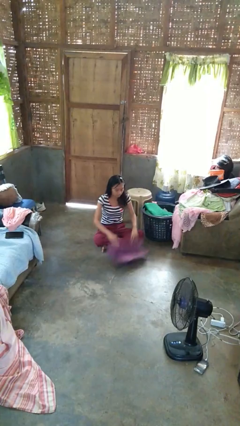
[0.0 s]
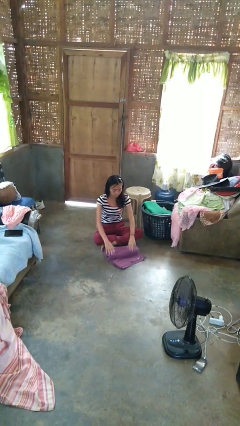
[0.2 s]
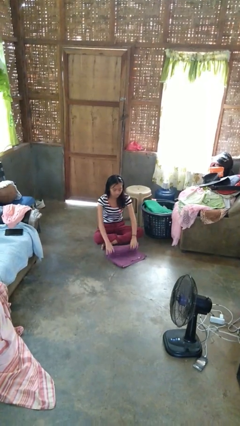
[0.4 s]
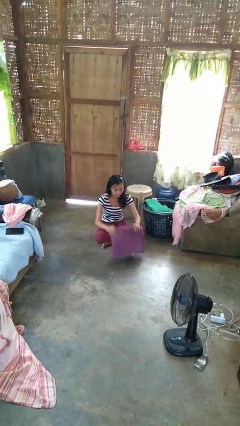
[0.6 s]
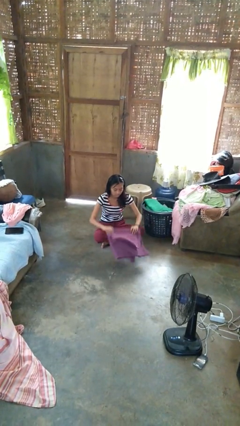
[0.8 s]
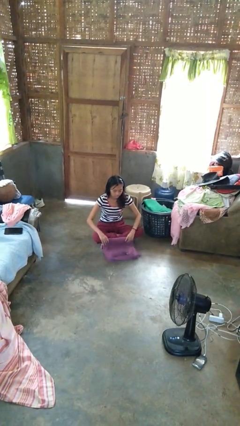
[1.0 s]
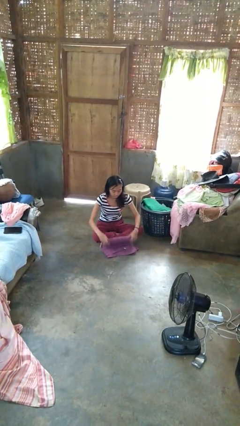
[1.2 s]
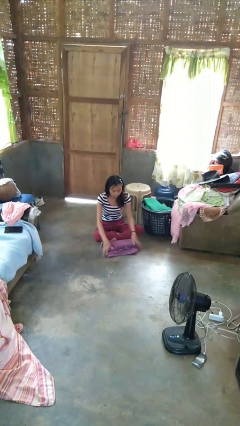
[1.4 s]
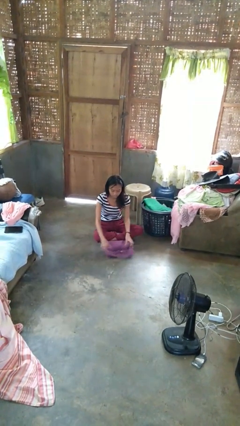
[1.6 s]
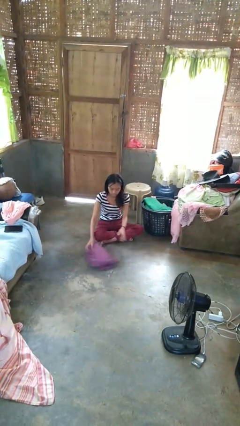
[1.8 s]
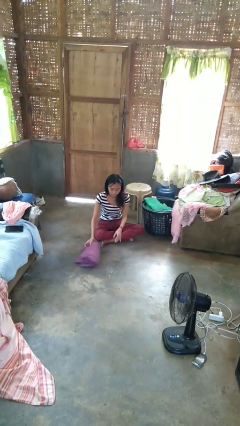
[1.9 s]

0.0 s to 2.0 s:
person folds towel

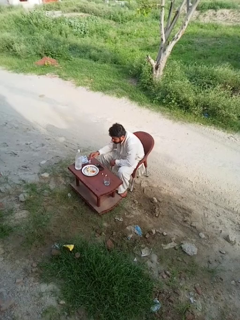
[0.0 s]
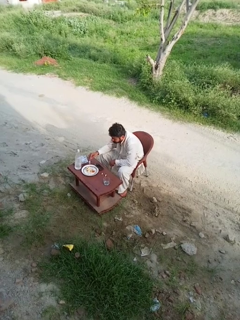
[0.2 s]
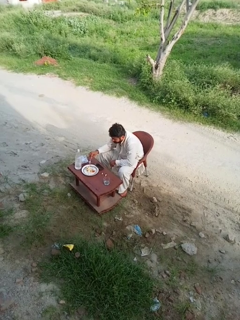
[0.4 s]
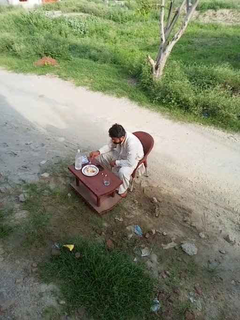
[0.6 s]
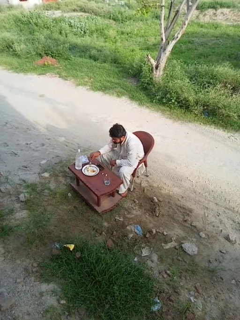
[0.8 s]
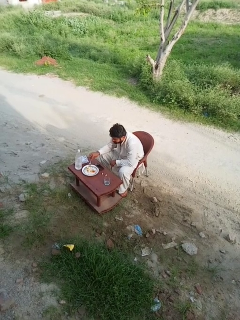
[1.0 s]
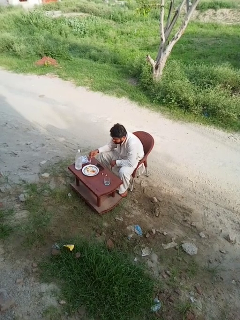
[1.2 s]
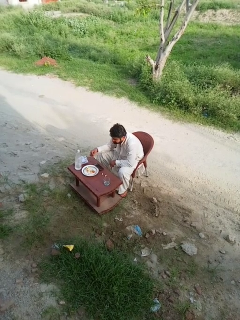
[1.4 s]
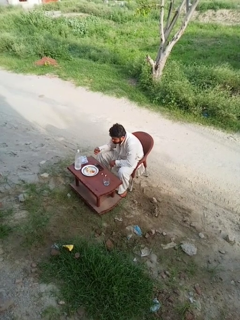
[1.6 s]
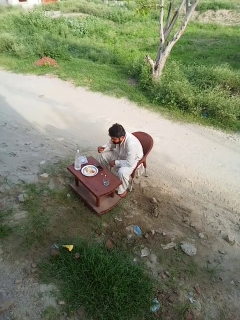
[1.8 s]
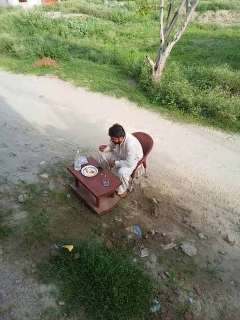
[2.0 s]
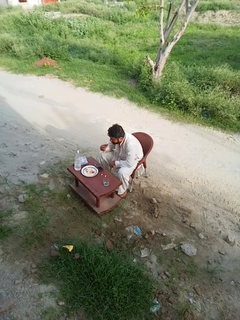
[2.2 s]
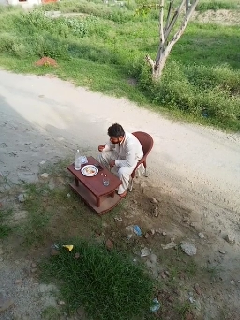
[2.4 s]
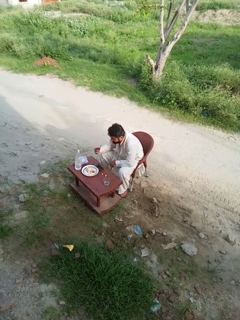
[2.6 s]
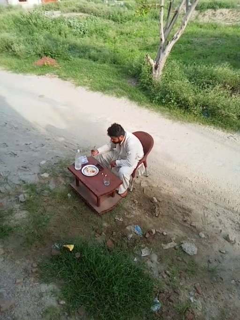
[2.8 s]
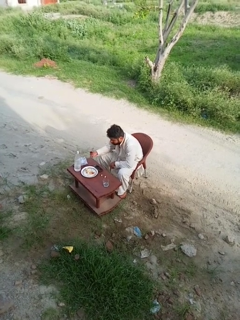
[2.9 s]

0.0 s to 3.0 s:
person eats with utensil

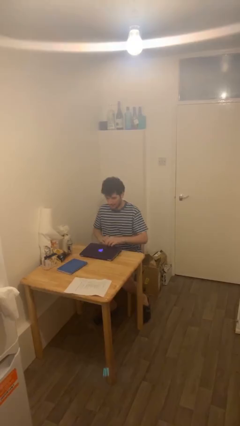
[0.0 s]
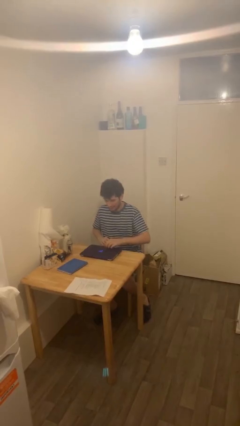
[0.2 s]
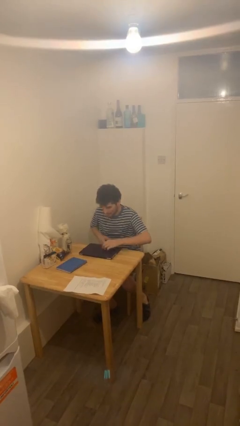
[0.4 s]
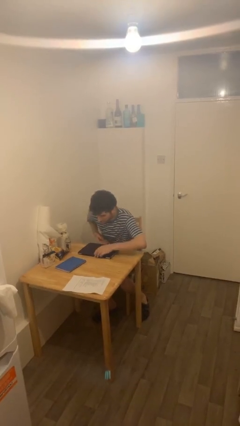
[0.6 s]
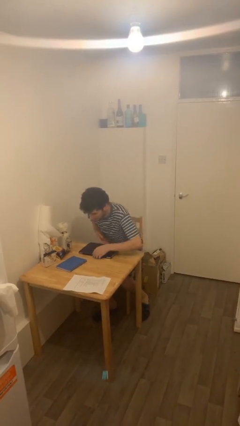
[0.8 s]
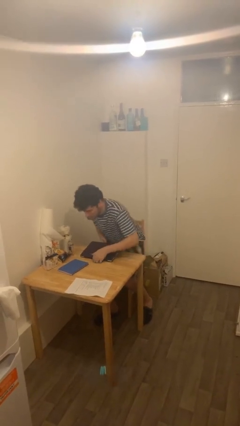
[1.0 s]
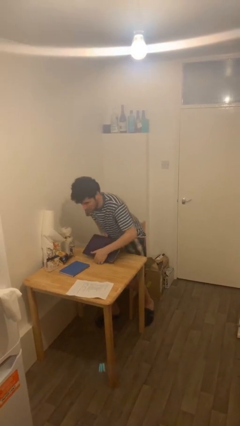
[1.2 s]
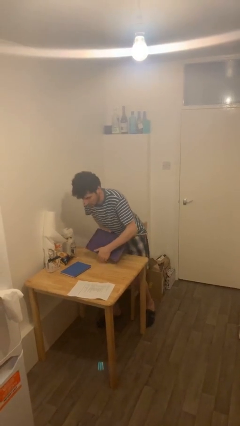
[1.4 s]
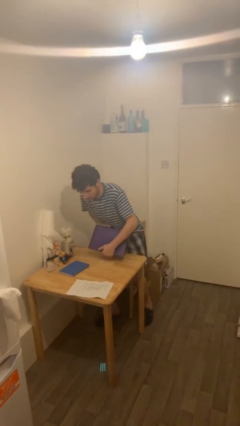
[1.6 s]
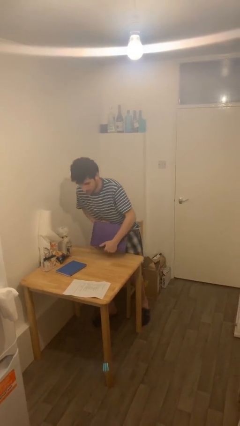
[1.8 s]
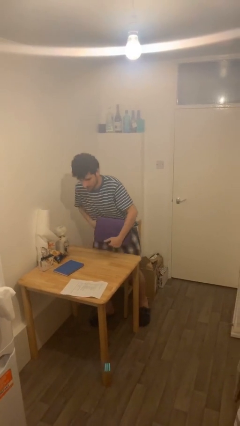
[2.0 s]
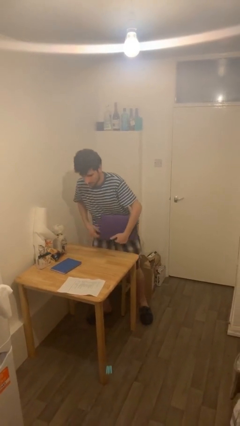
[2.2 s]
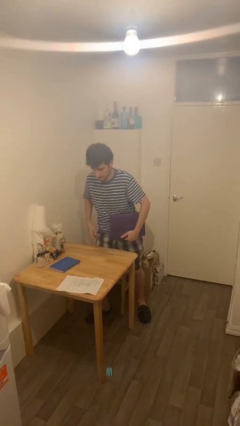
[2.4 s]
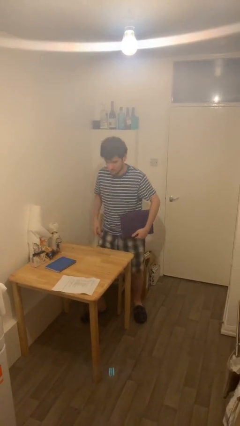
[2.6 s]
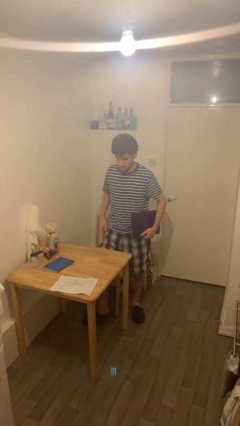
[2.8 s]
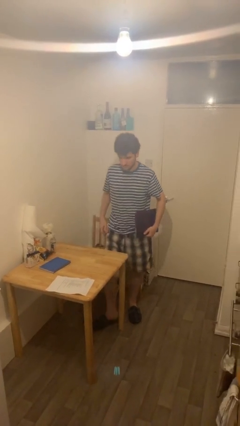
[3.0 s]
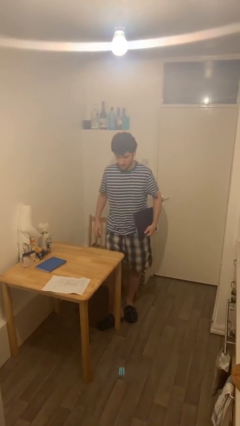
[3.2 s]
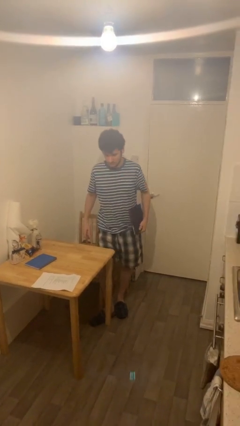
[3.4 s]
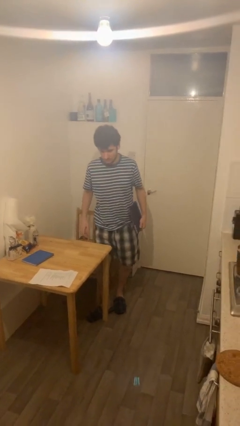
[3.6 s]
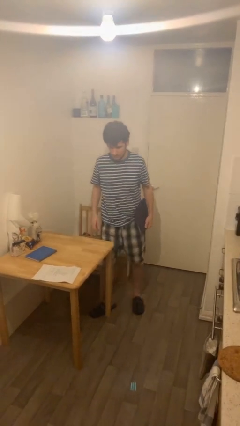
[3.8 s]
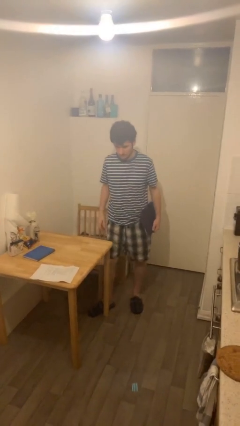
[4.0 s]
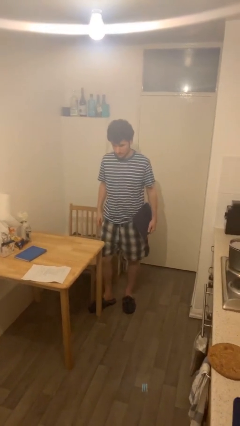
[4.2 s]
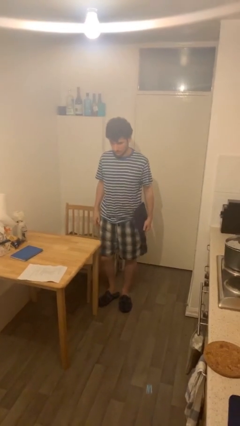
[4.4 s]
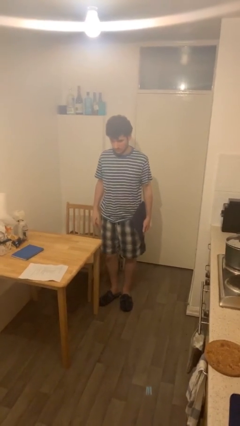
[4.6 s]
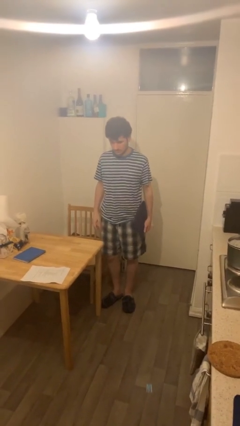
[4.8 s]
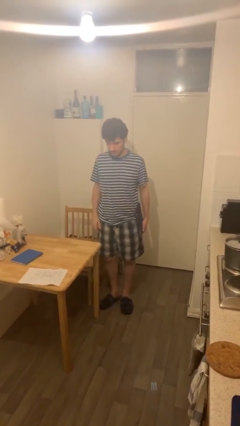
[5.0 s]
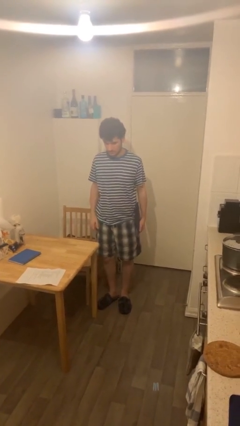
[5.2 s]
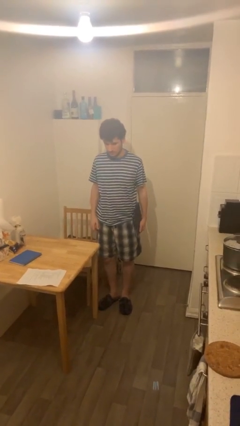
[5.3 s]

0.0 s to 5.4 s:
person stands up

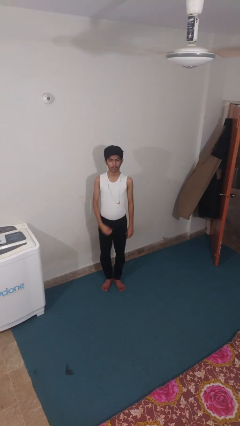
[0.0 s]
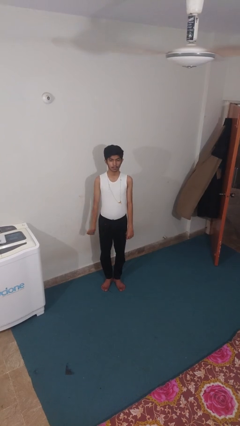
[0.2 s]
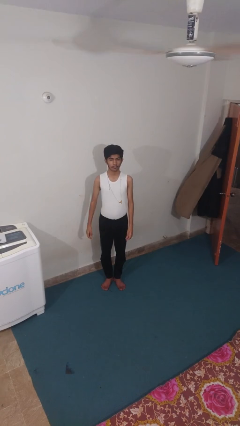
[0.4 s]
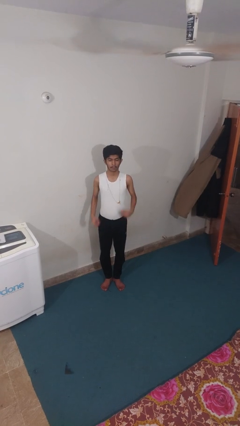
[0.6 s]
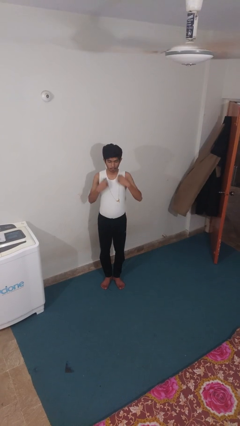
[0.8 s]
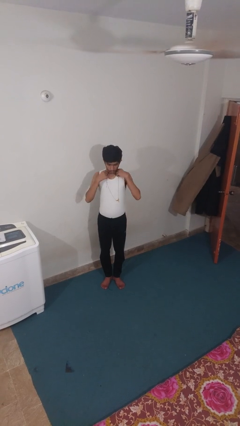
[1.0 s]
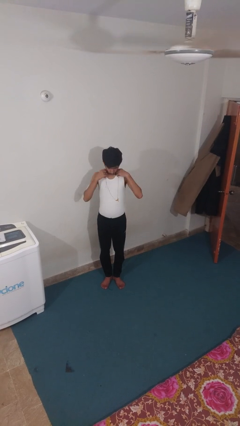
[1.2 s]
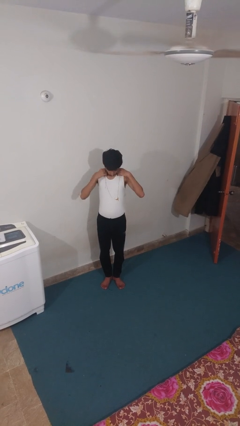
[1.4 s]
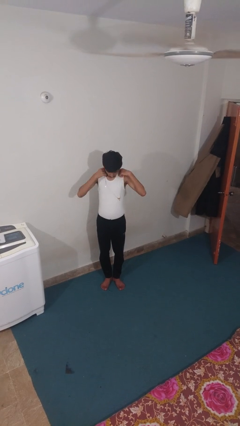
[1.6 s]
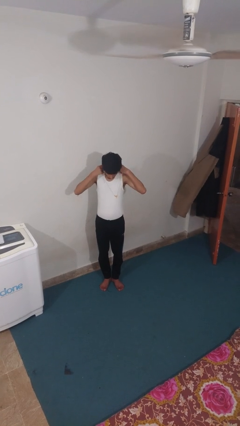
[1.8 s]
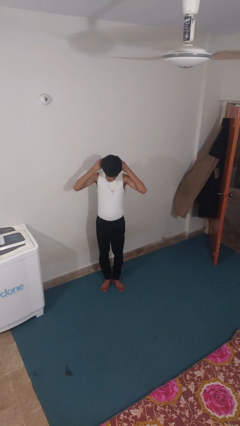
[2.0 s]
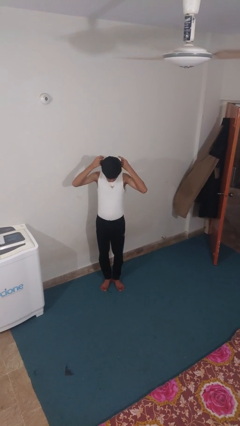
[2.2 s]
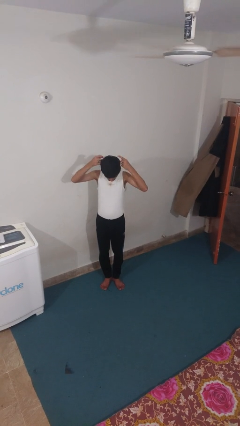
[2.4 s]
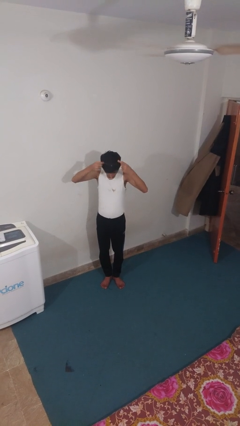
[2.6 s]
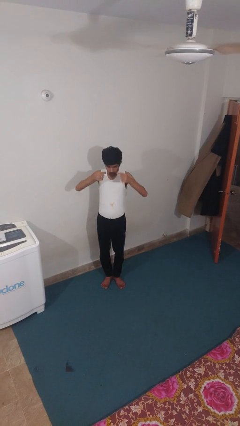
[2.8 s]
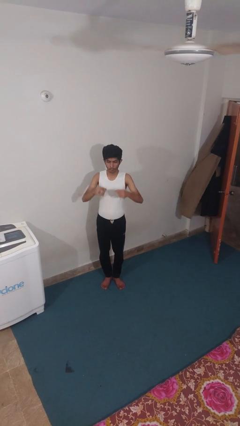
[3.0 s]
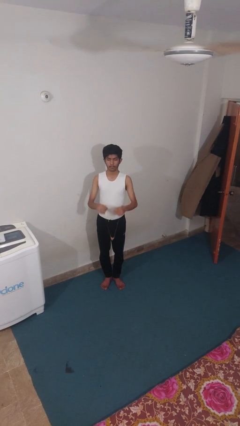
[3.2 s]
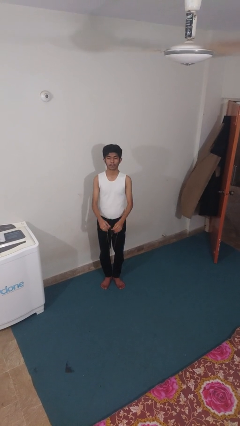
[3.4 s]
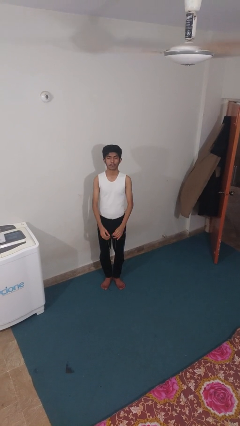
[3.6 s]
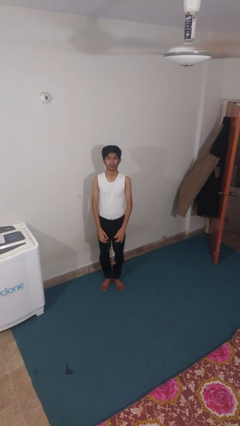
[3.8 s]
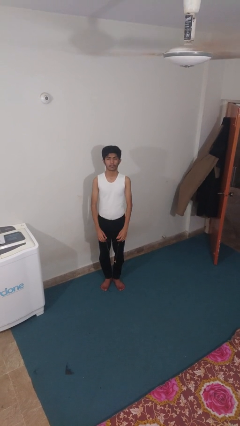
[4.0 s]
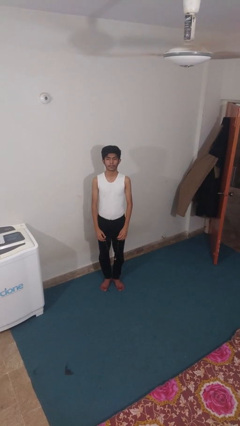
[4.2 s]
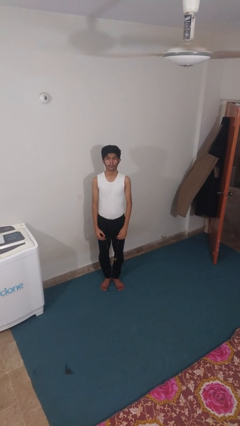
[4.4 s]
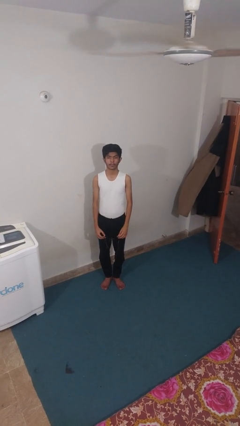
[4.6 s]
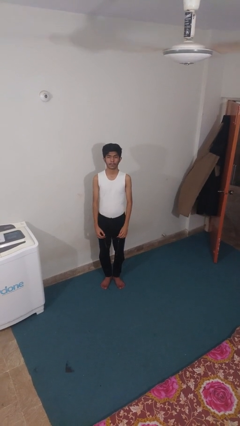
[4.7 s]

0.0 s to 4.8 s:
person takes off necklace

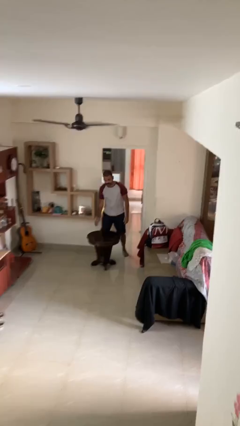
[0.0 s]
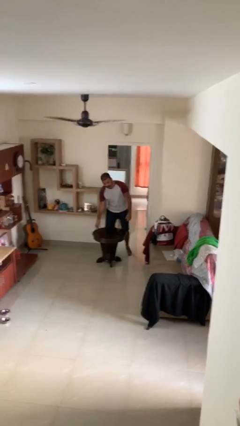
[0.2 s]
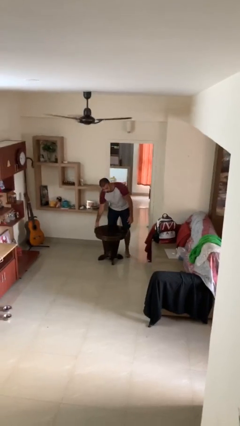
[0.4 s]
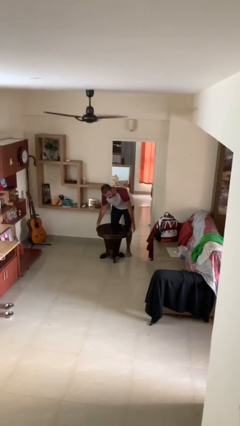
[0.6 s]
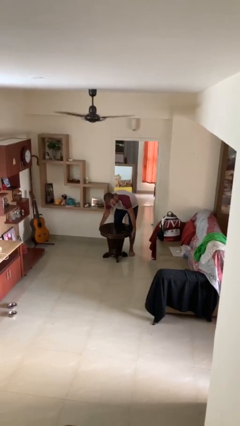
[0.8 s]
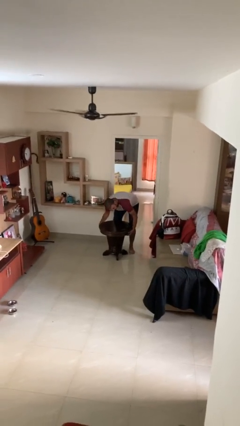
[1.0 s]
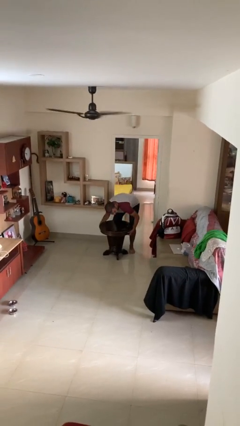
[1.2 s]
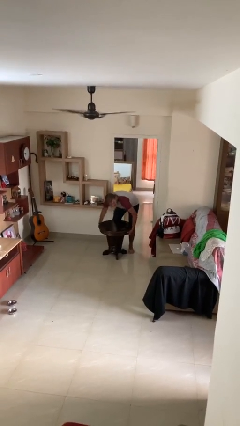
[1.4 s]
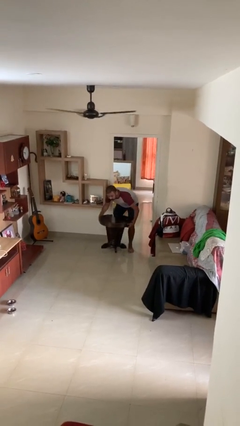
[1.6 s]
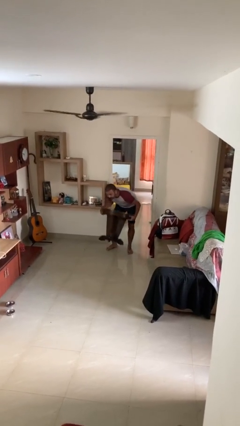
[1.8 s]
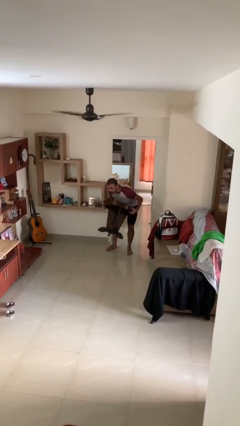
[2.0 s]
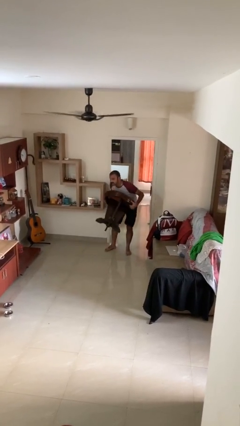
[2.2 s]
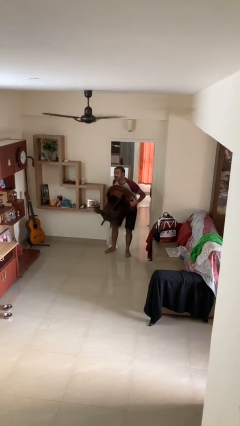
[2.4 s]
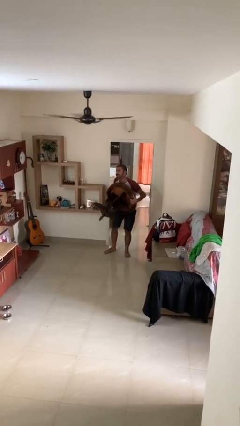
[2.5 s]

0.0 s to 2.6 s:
person picks up object from floor

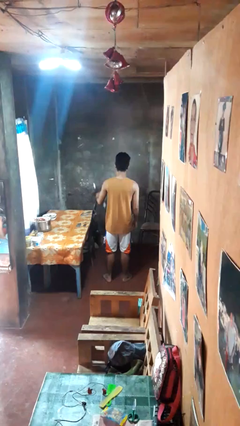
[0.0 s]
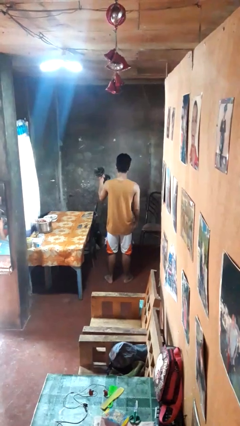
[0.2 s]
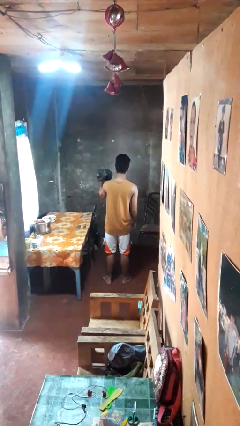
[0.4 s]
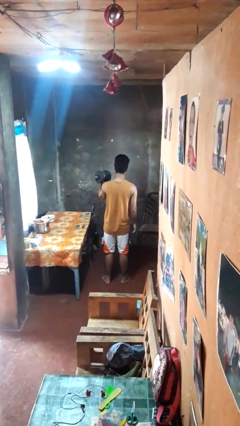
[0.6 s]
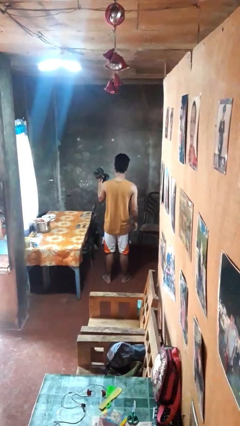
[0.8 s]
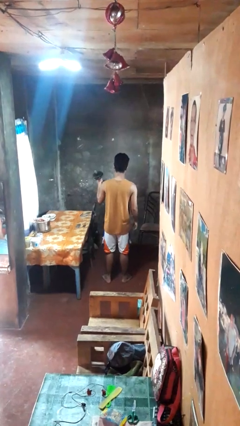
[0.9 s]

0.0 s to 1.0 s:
person lifts dumbbells
